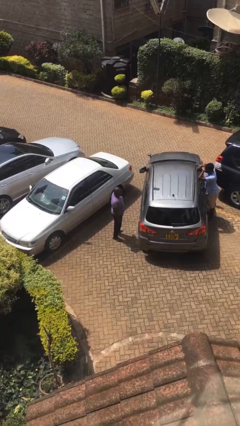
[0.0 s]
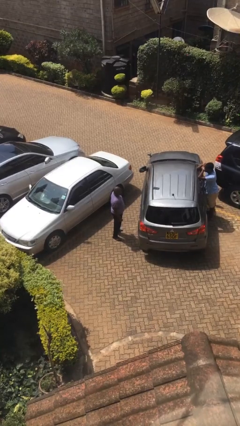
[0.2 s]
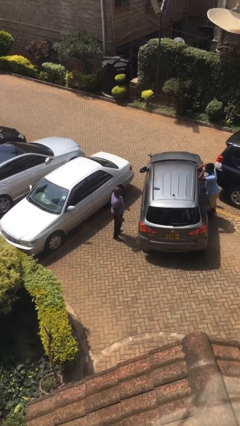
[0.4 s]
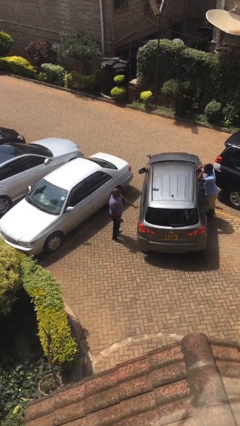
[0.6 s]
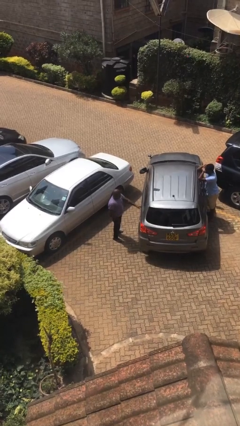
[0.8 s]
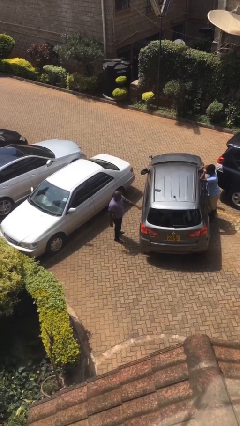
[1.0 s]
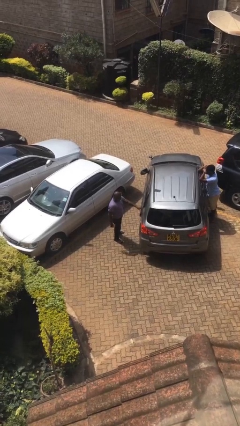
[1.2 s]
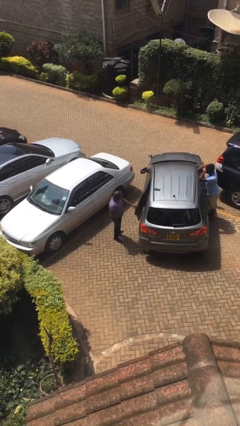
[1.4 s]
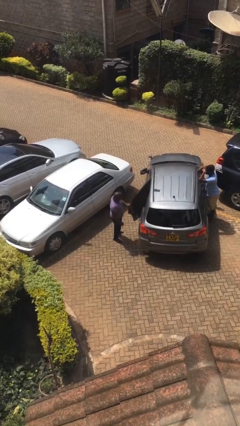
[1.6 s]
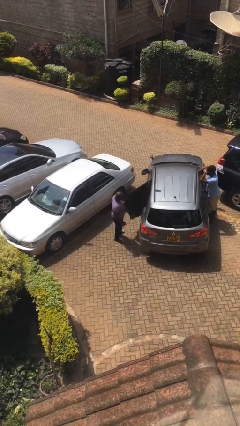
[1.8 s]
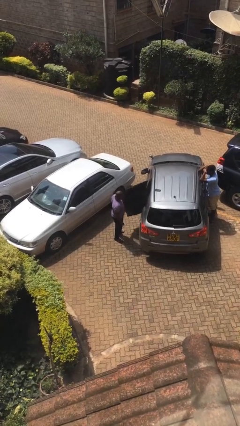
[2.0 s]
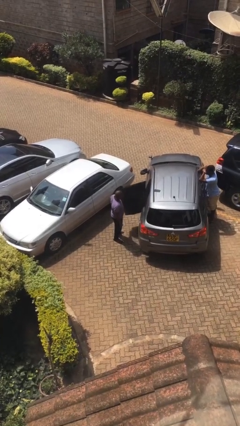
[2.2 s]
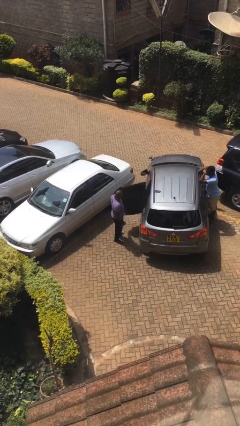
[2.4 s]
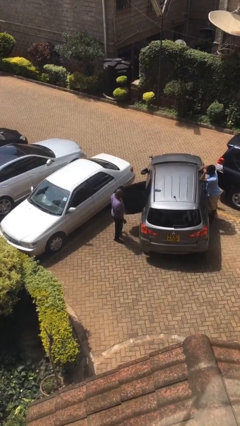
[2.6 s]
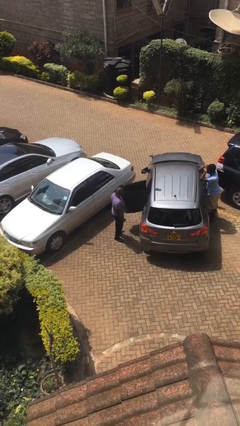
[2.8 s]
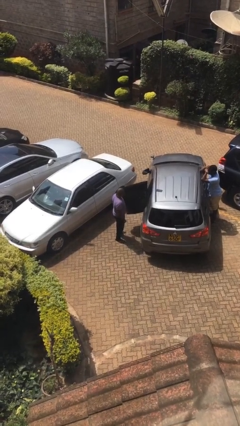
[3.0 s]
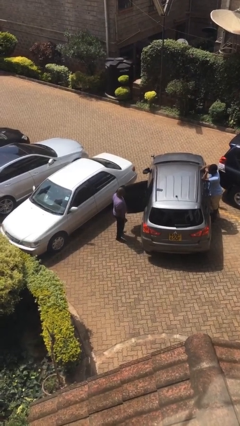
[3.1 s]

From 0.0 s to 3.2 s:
person opens car door

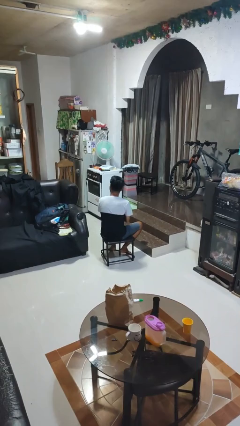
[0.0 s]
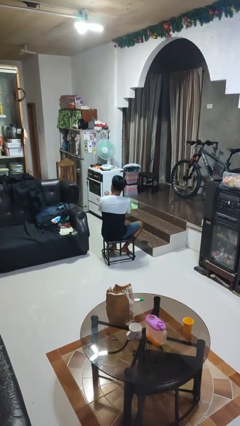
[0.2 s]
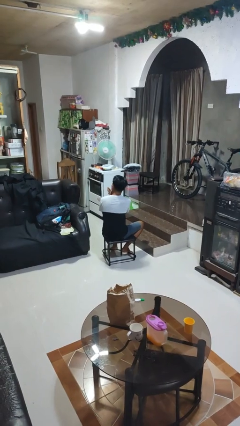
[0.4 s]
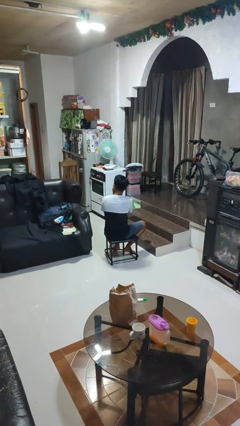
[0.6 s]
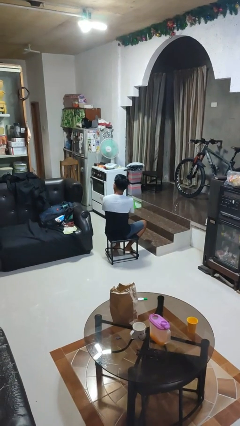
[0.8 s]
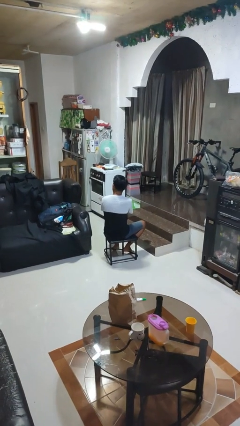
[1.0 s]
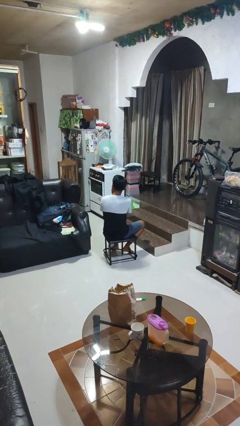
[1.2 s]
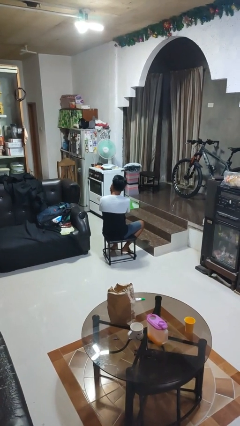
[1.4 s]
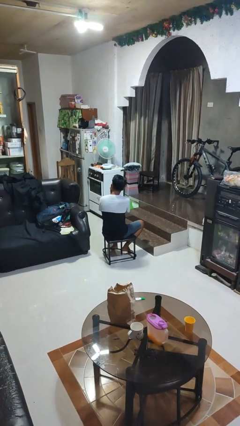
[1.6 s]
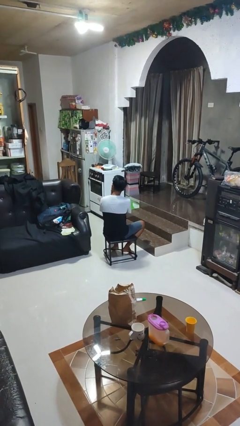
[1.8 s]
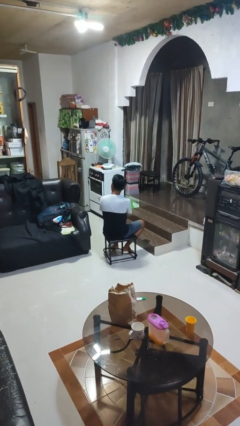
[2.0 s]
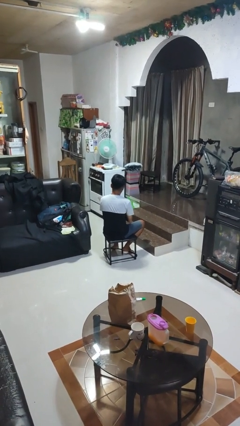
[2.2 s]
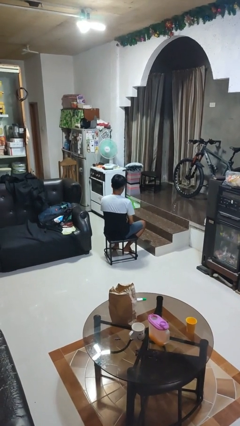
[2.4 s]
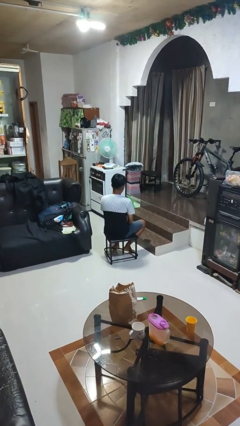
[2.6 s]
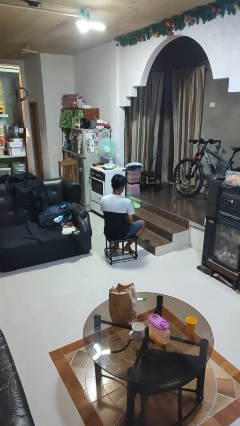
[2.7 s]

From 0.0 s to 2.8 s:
person strokes chin

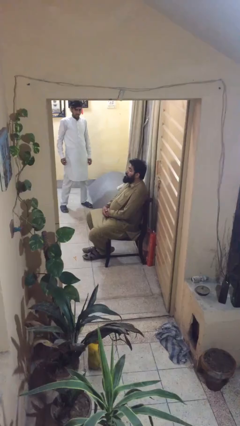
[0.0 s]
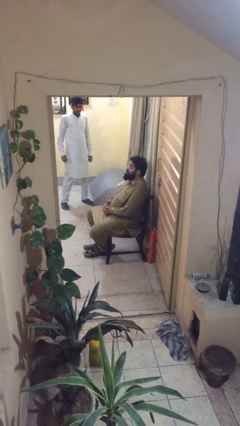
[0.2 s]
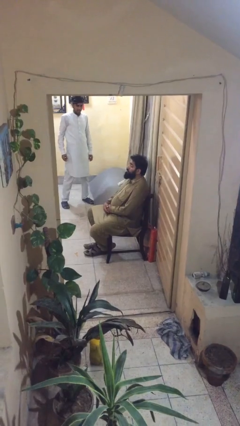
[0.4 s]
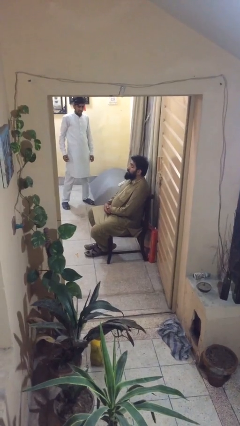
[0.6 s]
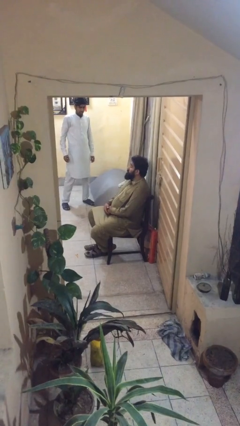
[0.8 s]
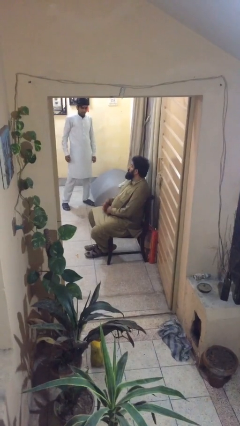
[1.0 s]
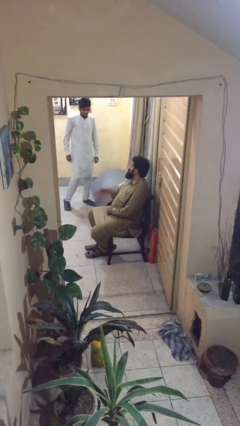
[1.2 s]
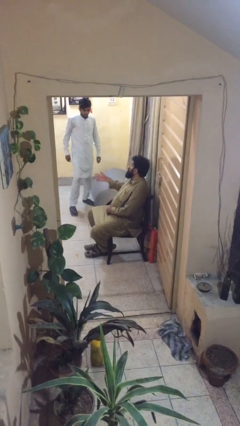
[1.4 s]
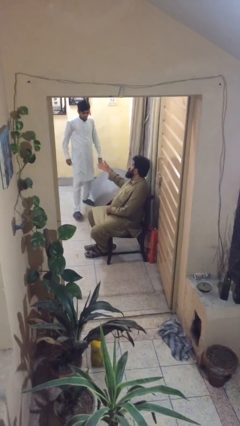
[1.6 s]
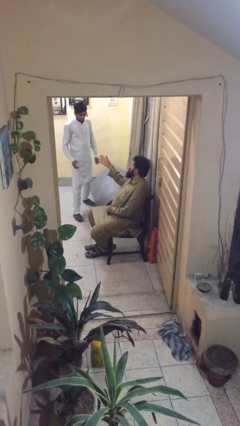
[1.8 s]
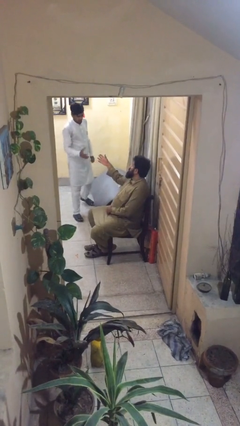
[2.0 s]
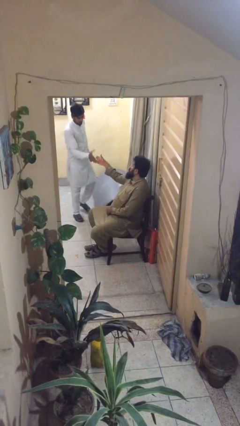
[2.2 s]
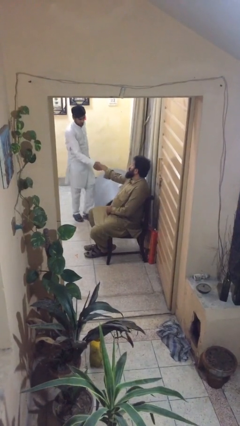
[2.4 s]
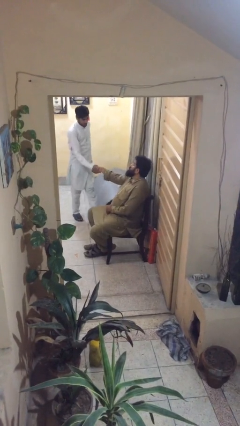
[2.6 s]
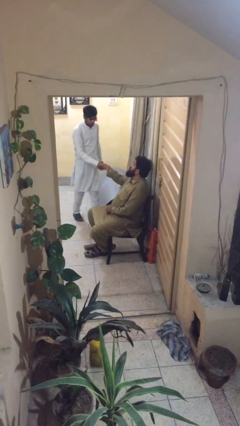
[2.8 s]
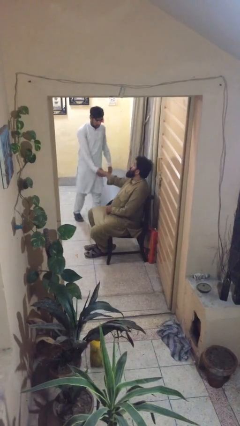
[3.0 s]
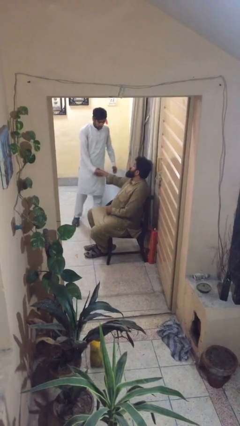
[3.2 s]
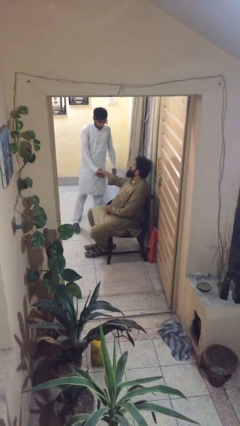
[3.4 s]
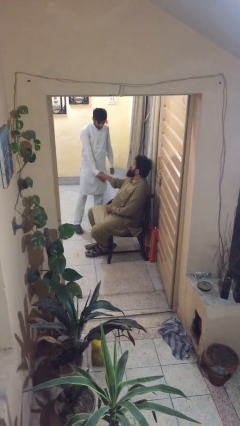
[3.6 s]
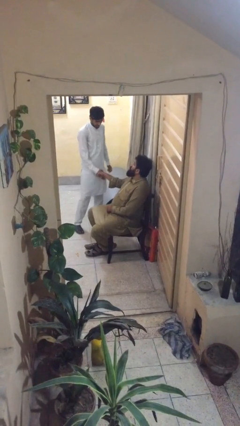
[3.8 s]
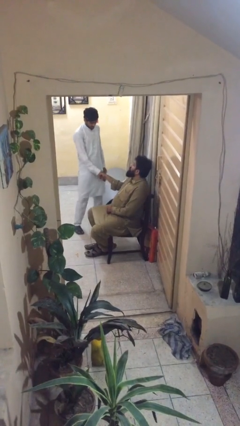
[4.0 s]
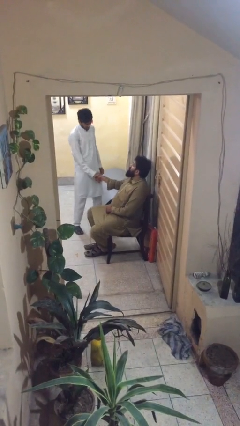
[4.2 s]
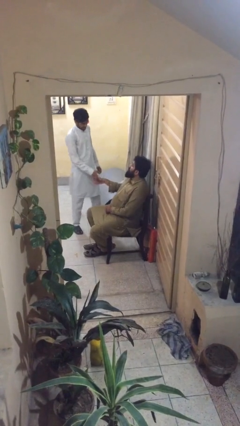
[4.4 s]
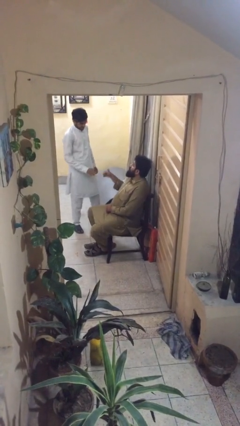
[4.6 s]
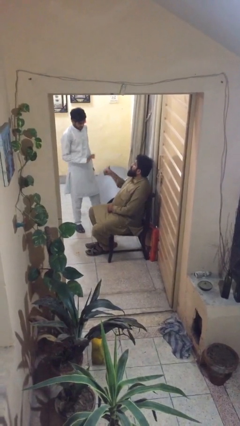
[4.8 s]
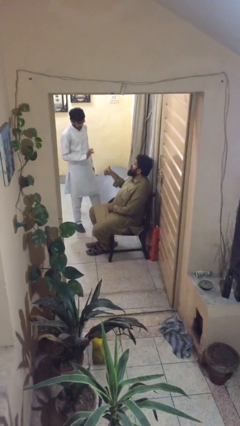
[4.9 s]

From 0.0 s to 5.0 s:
person shakes hand

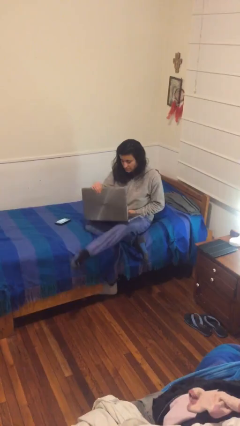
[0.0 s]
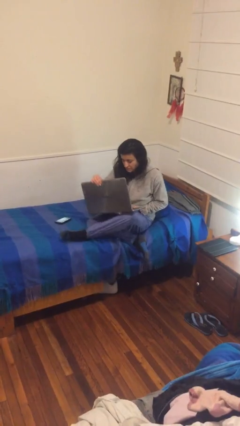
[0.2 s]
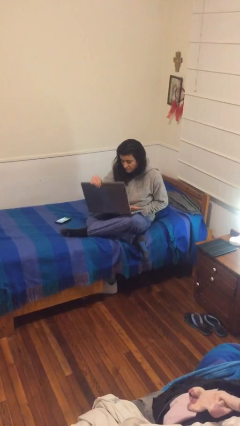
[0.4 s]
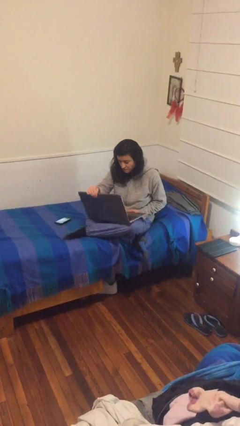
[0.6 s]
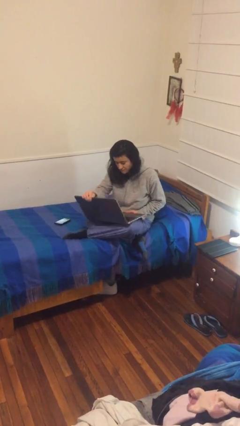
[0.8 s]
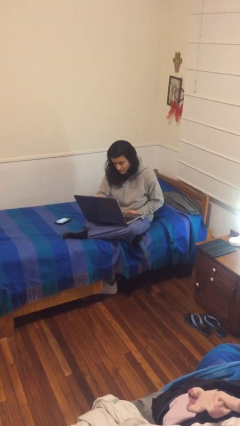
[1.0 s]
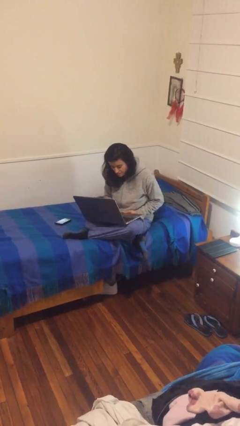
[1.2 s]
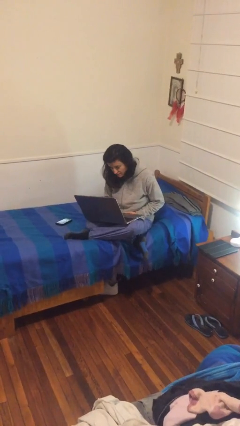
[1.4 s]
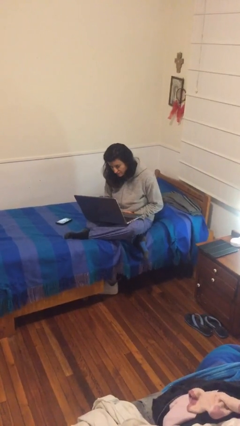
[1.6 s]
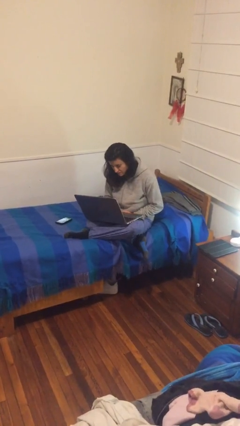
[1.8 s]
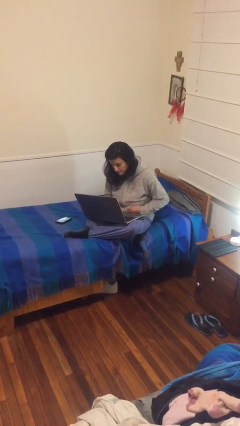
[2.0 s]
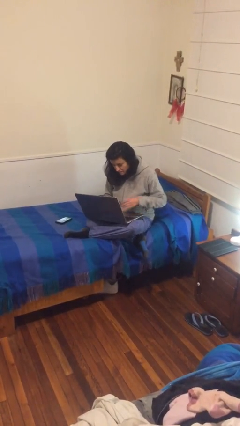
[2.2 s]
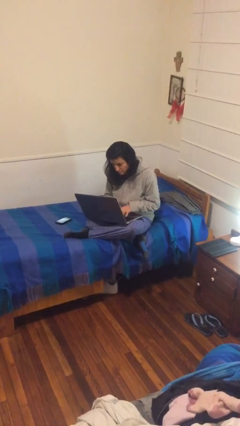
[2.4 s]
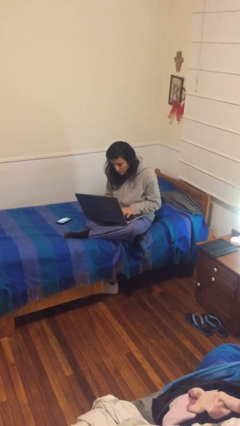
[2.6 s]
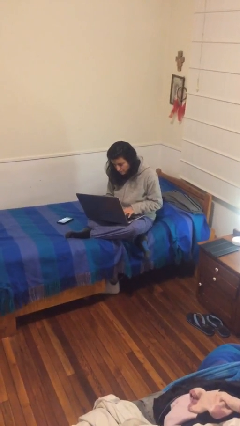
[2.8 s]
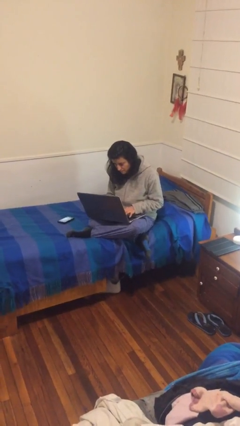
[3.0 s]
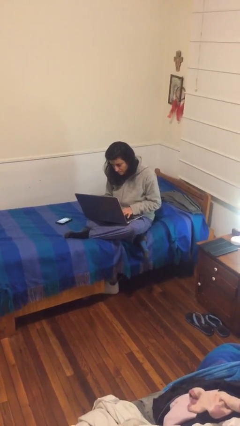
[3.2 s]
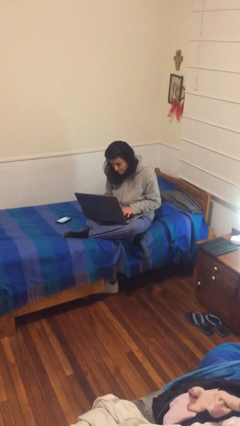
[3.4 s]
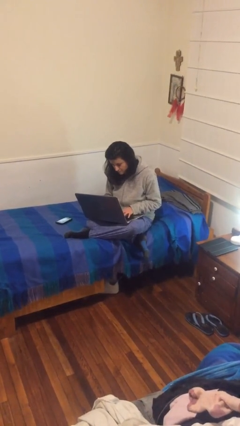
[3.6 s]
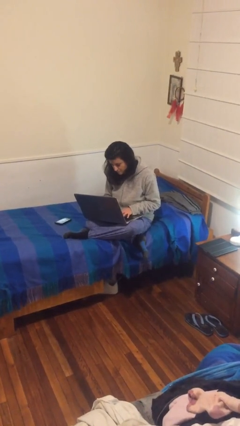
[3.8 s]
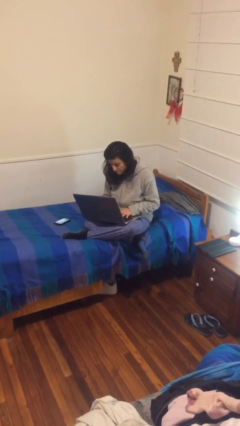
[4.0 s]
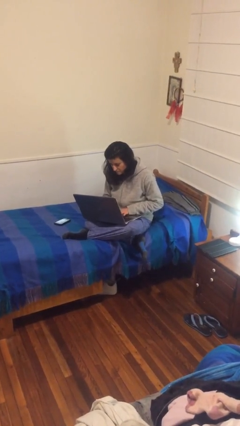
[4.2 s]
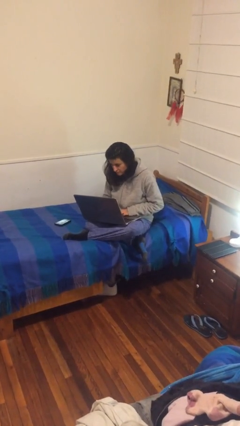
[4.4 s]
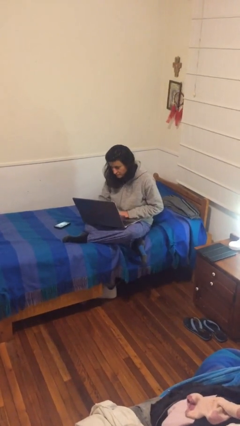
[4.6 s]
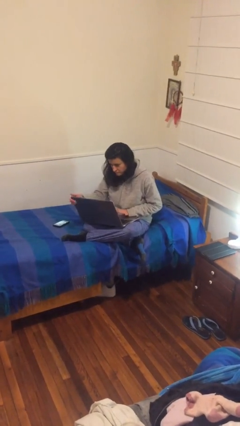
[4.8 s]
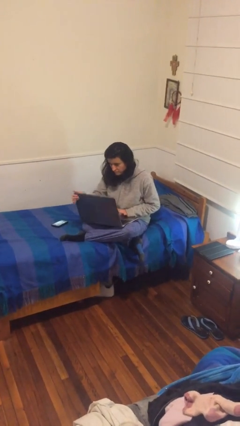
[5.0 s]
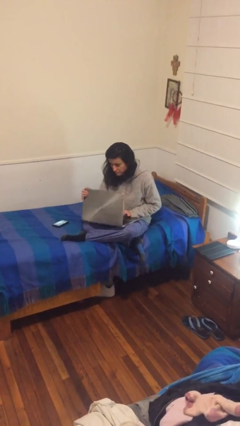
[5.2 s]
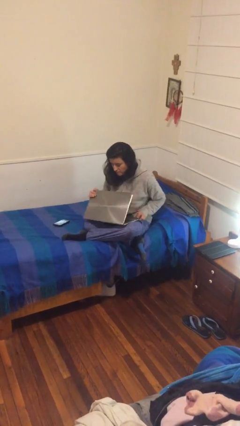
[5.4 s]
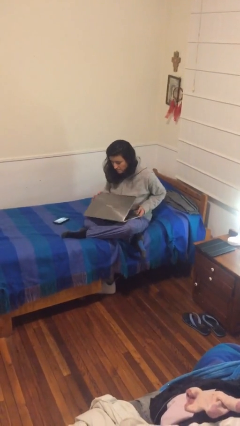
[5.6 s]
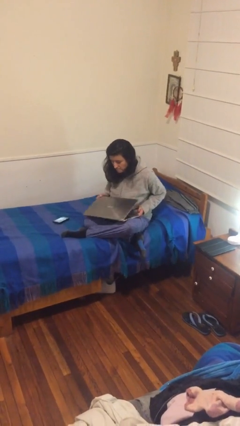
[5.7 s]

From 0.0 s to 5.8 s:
person interacts with laptop

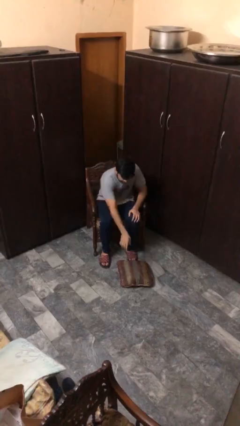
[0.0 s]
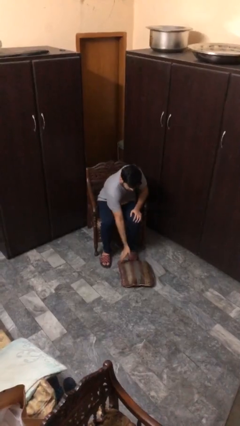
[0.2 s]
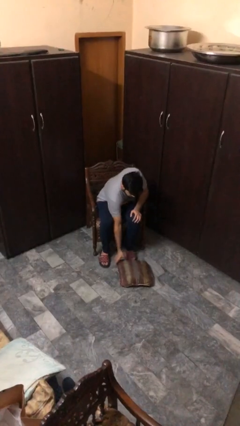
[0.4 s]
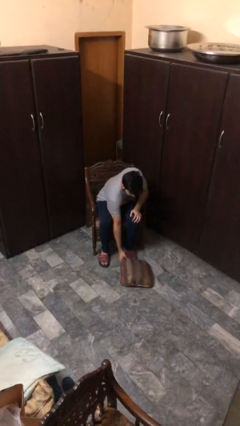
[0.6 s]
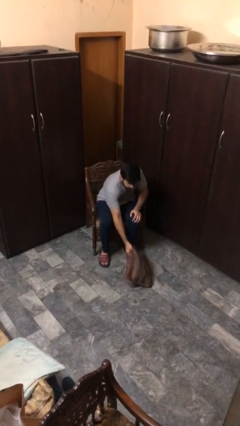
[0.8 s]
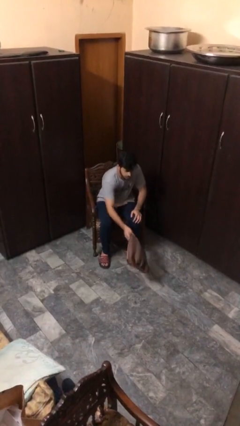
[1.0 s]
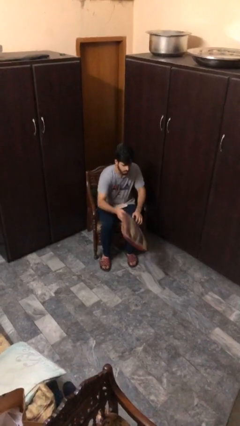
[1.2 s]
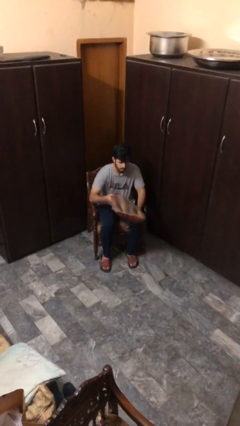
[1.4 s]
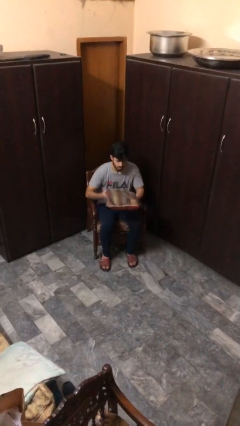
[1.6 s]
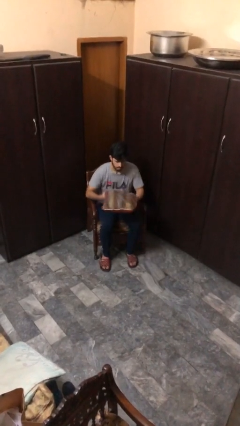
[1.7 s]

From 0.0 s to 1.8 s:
person picks up object from floor
